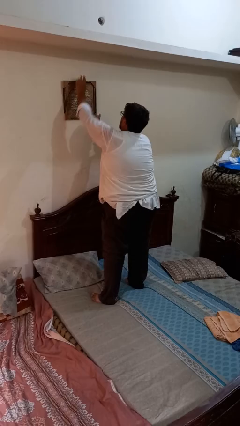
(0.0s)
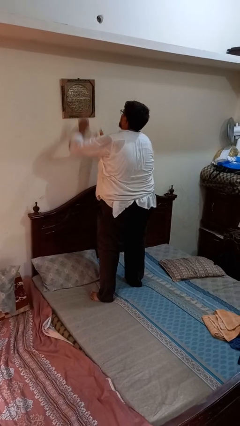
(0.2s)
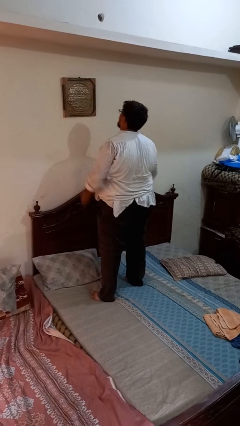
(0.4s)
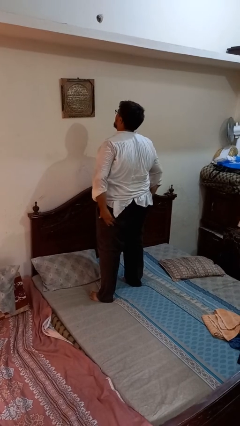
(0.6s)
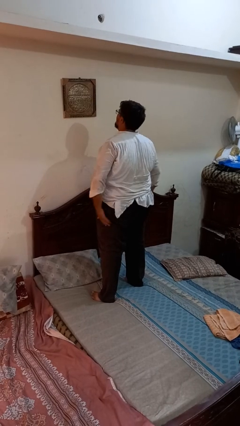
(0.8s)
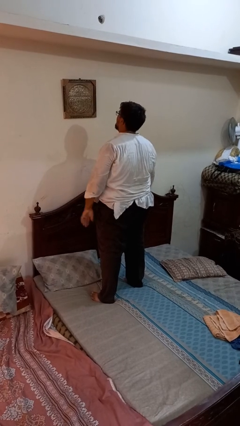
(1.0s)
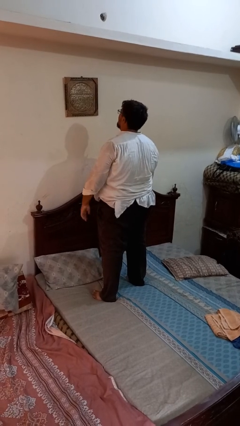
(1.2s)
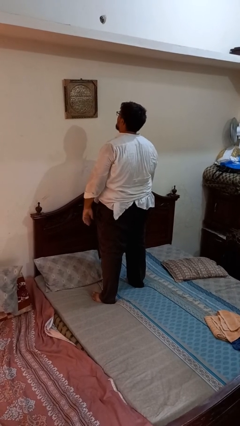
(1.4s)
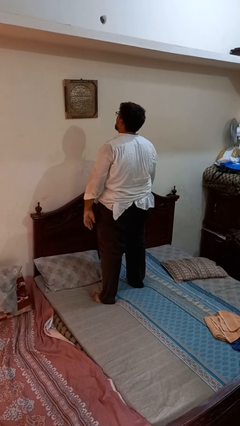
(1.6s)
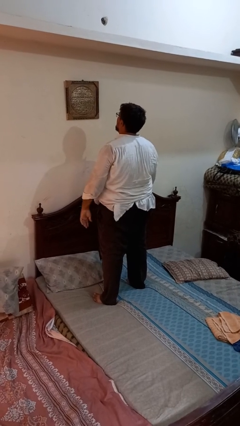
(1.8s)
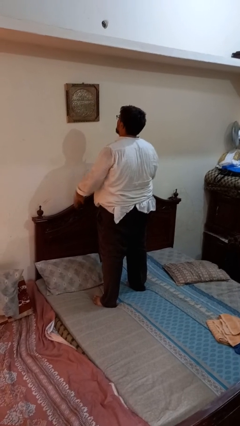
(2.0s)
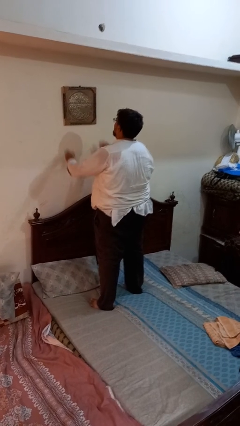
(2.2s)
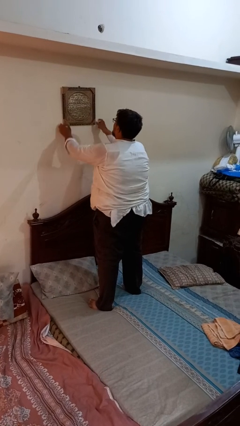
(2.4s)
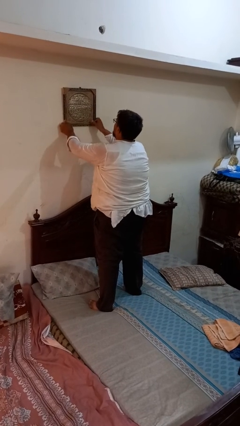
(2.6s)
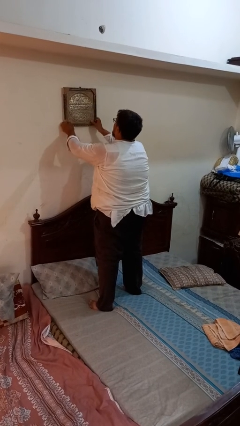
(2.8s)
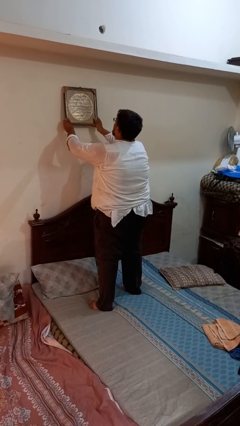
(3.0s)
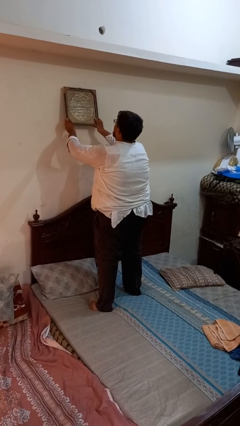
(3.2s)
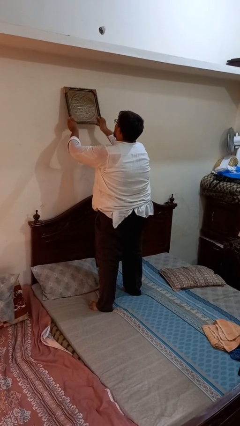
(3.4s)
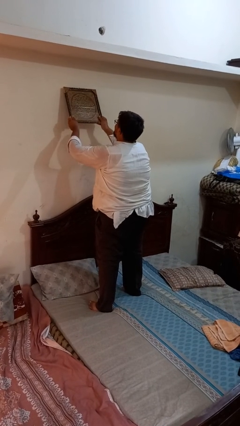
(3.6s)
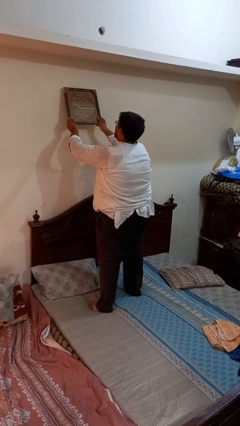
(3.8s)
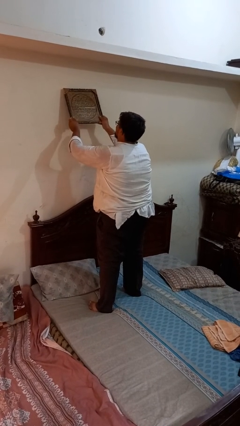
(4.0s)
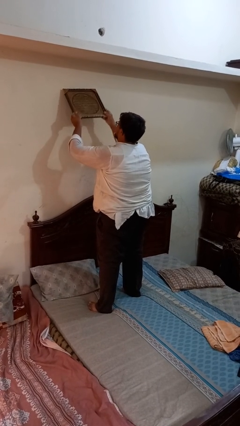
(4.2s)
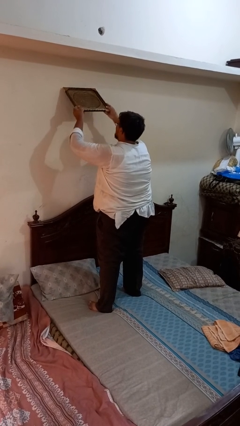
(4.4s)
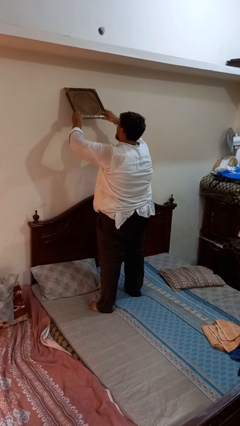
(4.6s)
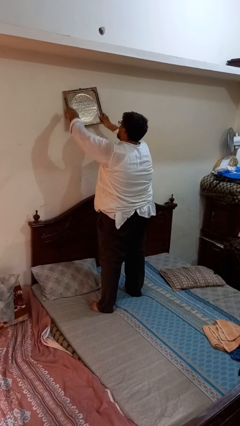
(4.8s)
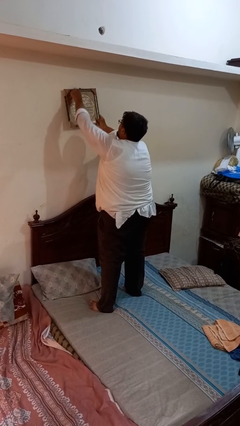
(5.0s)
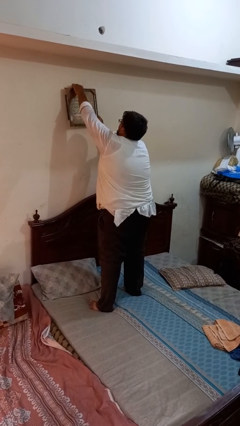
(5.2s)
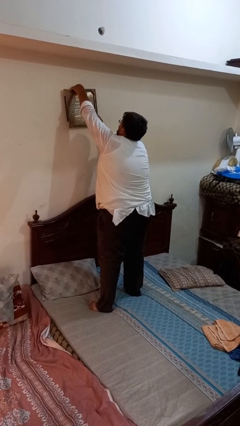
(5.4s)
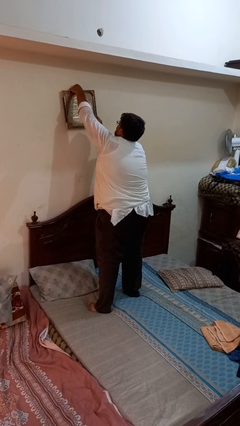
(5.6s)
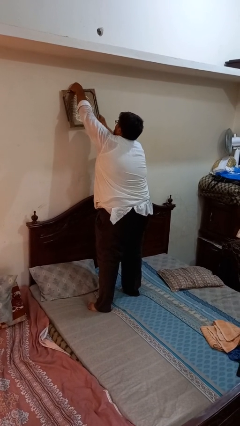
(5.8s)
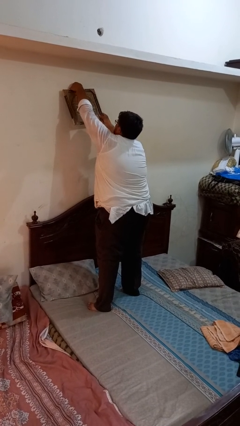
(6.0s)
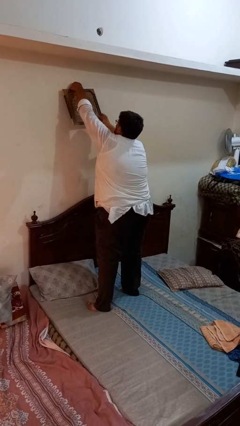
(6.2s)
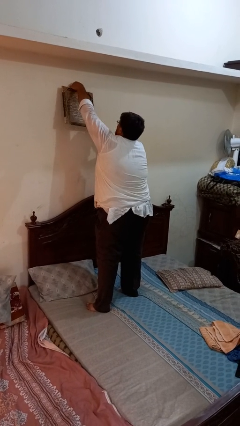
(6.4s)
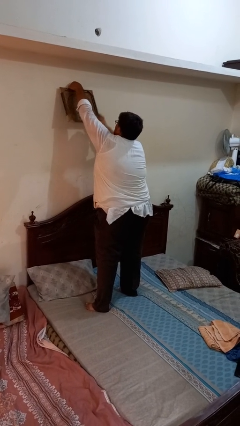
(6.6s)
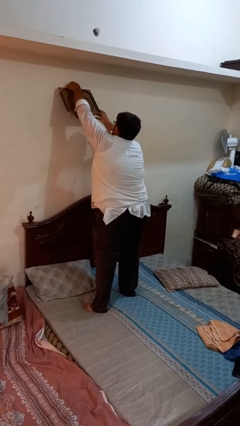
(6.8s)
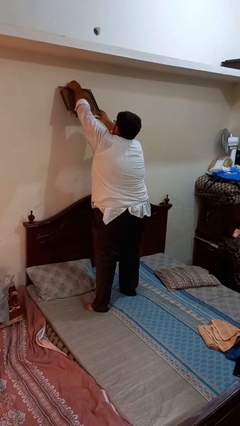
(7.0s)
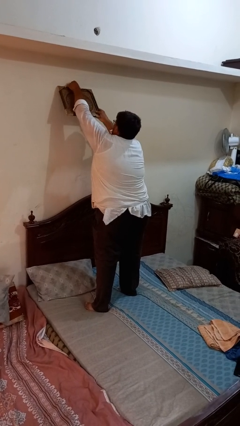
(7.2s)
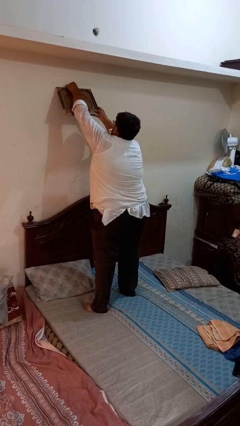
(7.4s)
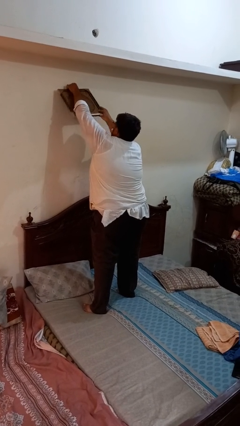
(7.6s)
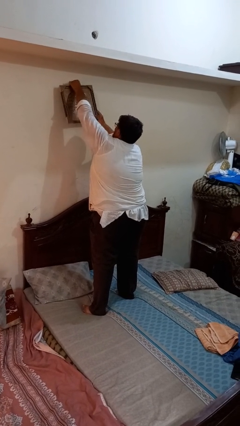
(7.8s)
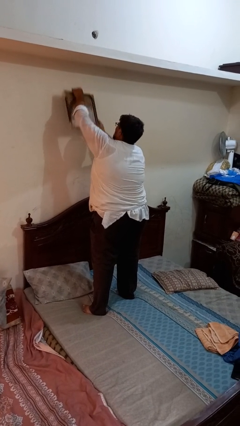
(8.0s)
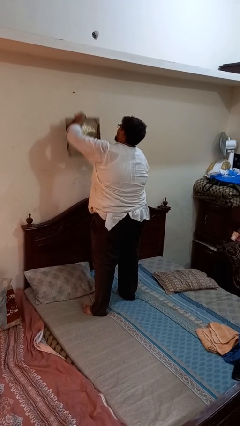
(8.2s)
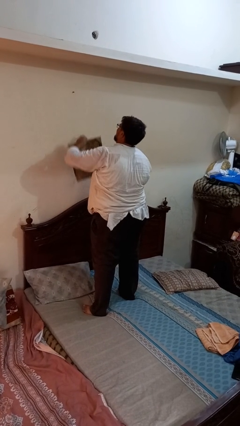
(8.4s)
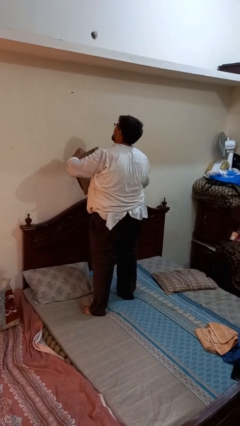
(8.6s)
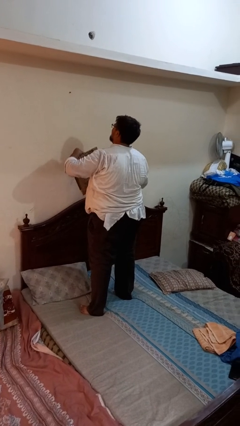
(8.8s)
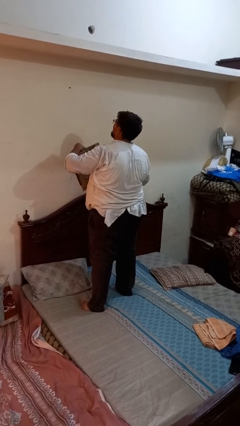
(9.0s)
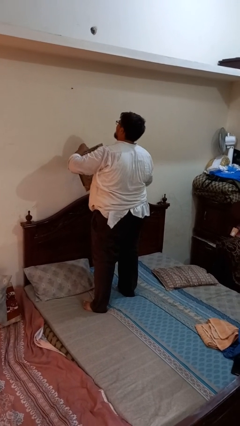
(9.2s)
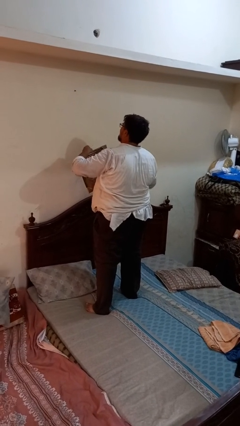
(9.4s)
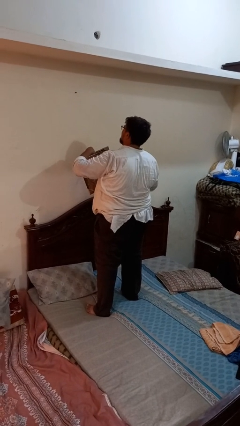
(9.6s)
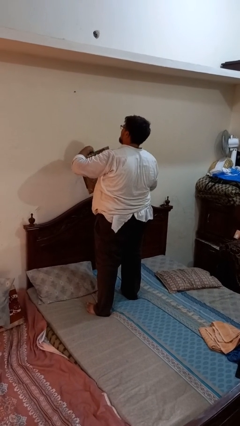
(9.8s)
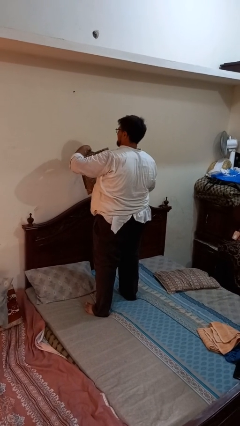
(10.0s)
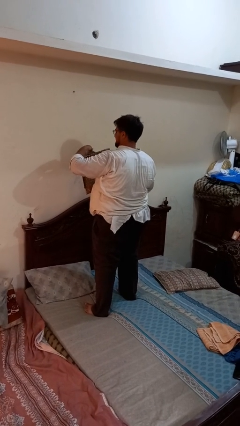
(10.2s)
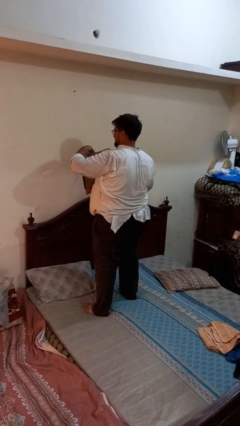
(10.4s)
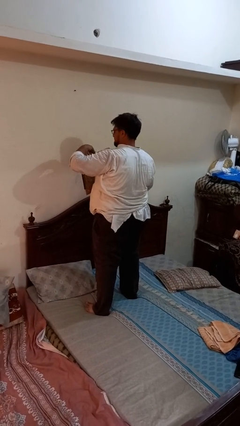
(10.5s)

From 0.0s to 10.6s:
person takes down picture frame

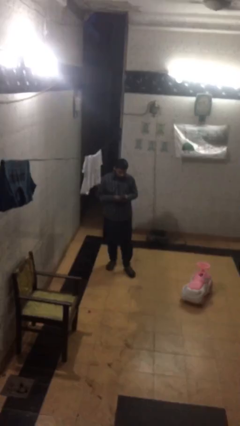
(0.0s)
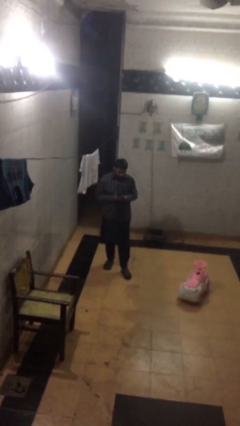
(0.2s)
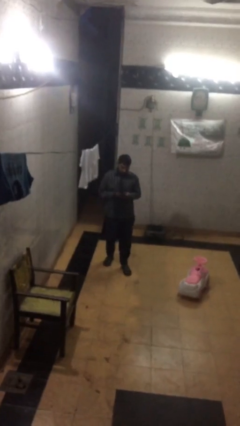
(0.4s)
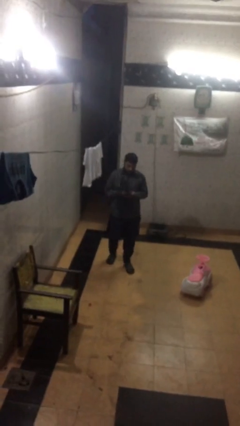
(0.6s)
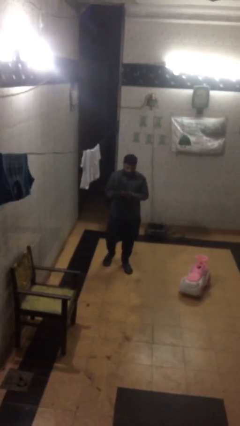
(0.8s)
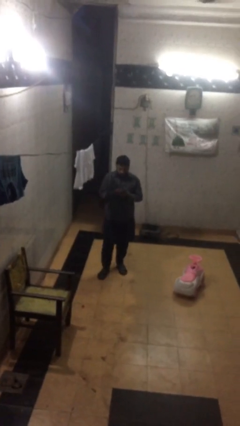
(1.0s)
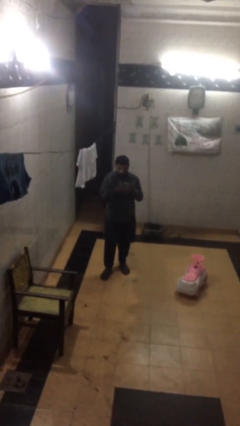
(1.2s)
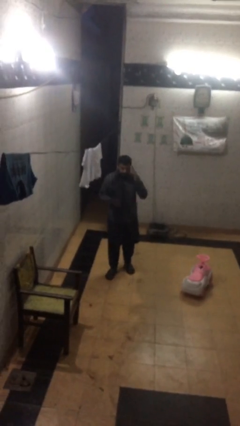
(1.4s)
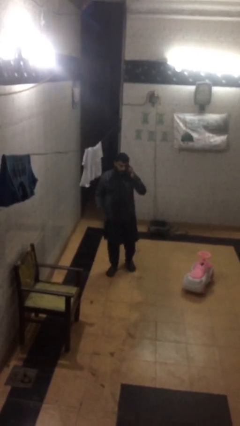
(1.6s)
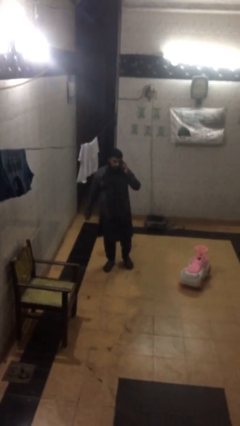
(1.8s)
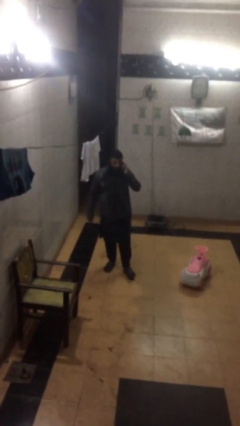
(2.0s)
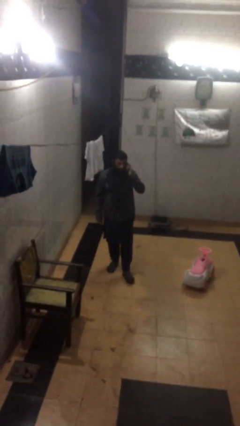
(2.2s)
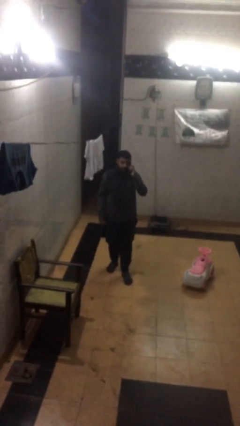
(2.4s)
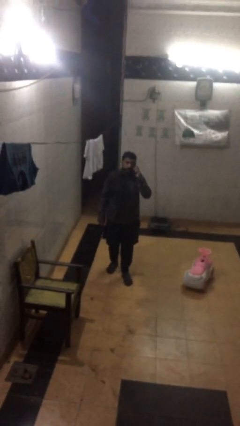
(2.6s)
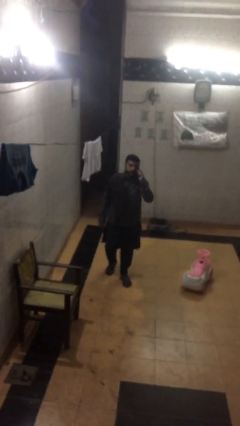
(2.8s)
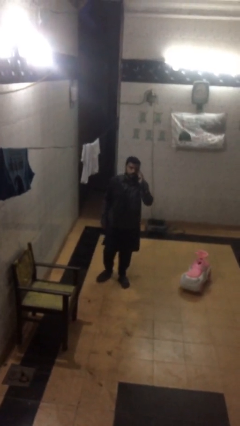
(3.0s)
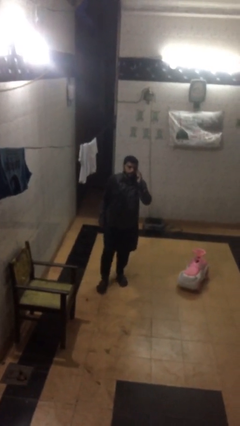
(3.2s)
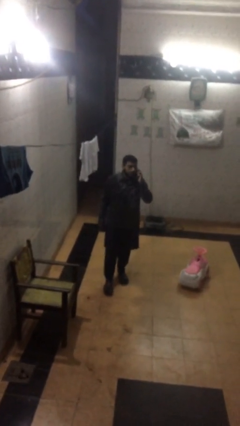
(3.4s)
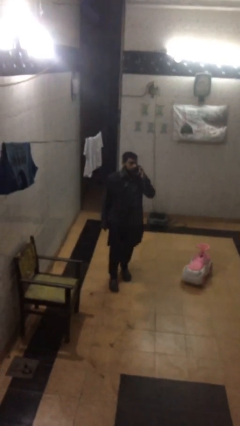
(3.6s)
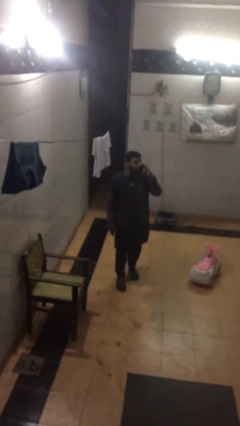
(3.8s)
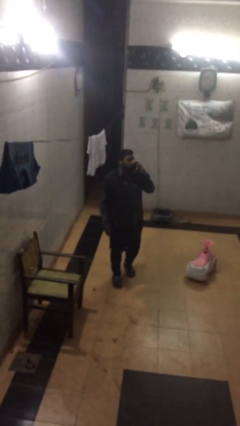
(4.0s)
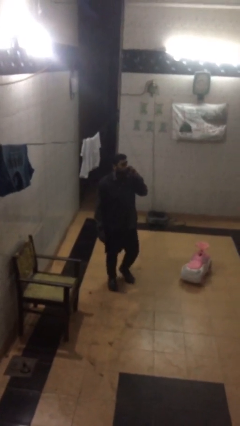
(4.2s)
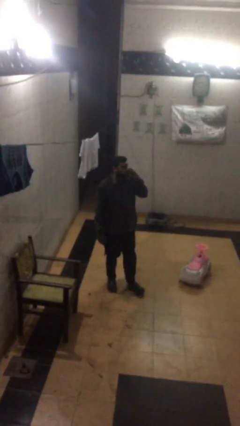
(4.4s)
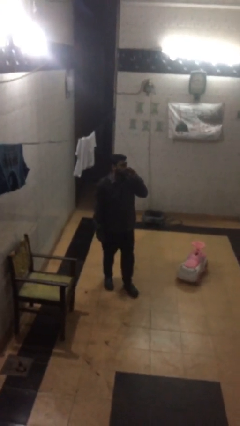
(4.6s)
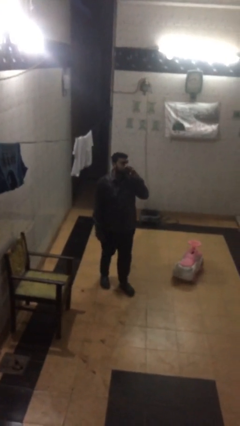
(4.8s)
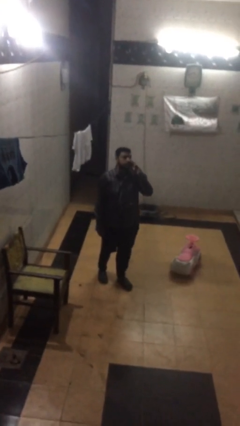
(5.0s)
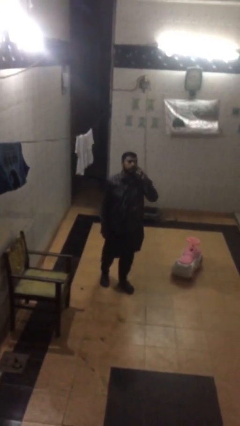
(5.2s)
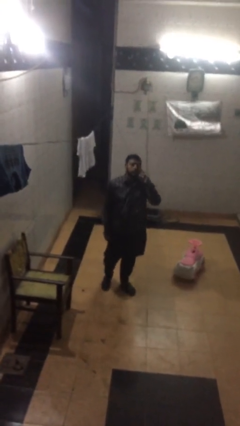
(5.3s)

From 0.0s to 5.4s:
person talks on phone

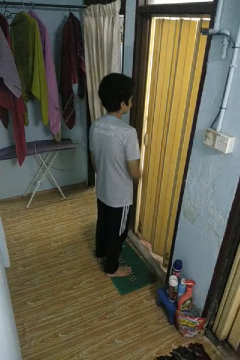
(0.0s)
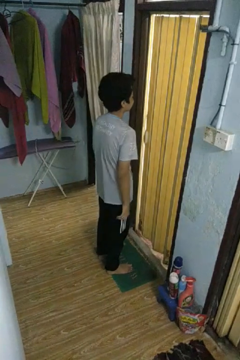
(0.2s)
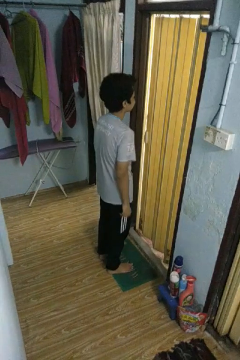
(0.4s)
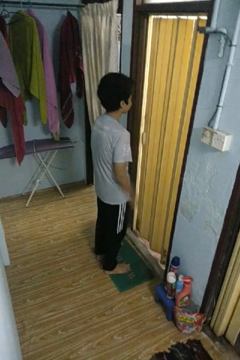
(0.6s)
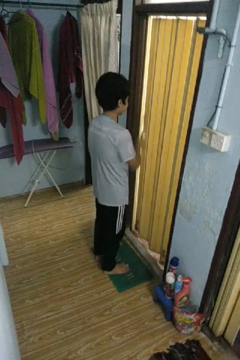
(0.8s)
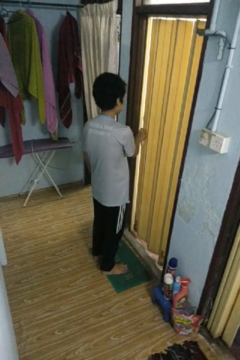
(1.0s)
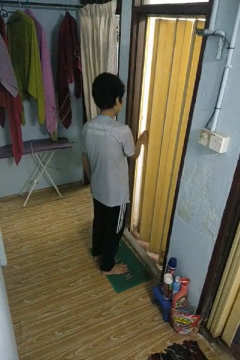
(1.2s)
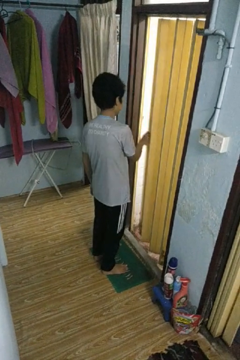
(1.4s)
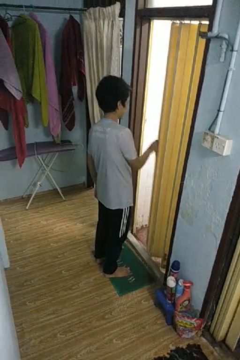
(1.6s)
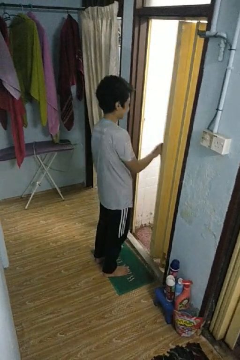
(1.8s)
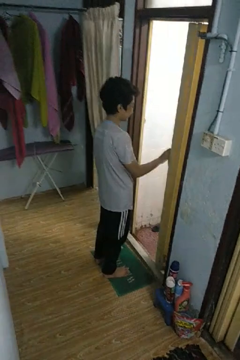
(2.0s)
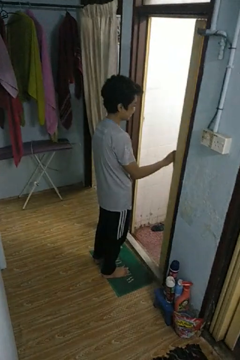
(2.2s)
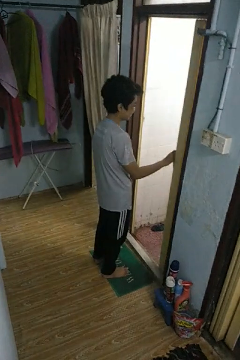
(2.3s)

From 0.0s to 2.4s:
person opens sliding door
